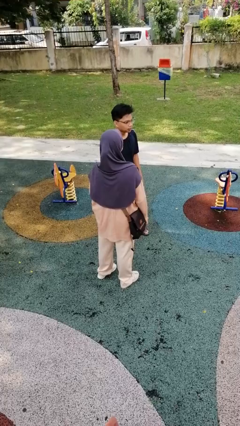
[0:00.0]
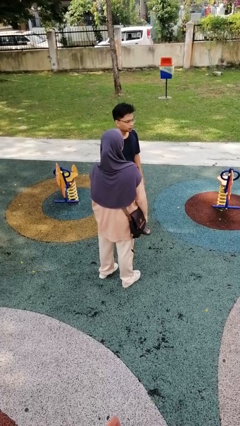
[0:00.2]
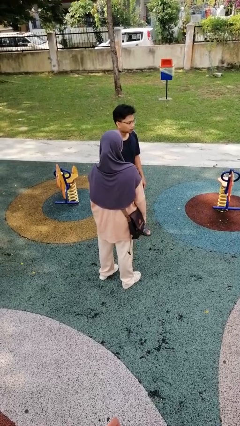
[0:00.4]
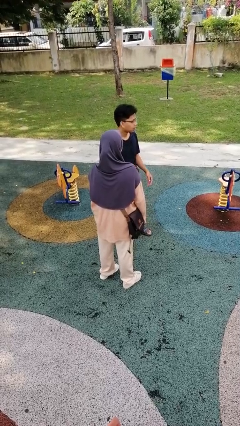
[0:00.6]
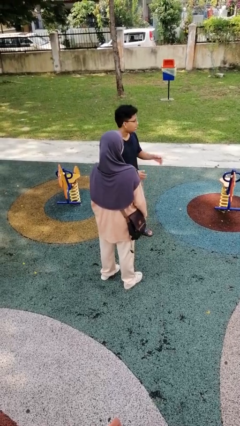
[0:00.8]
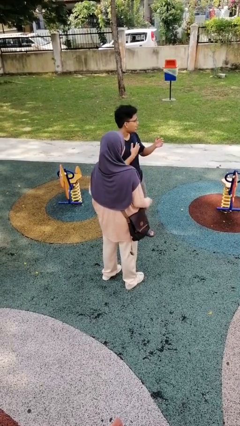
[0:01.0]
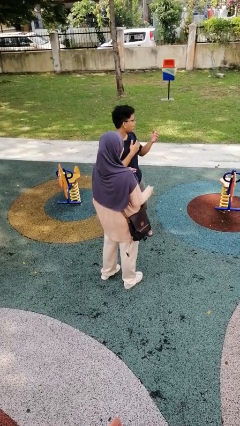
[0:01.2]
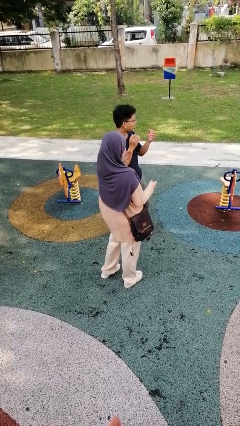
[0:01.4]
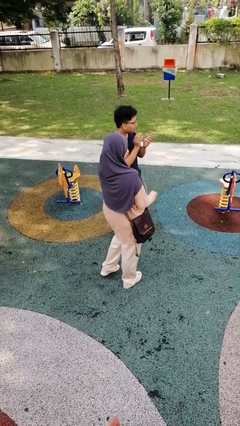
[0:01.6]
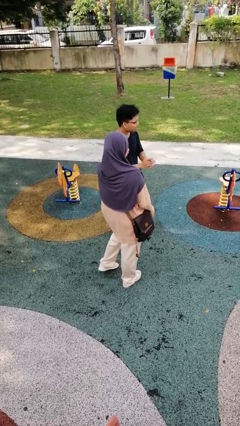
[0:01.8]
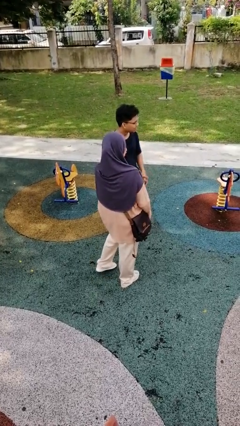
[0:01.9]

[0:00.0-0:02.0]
person laughs with person

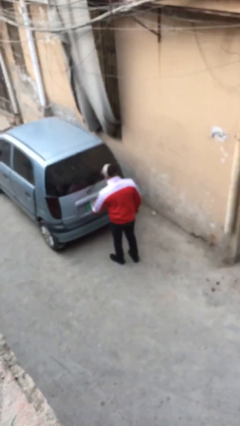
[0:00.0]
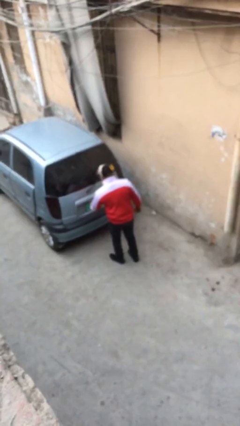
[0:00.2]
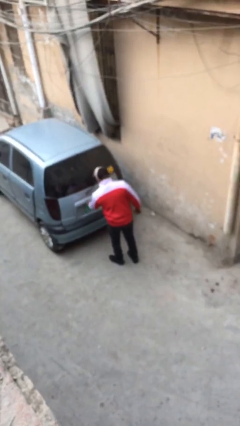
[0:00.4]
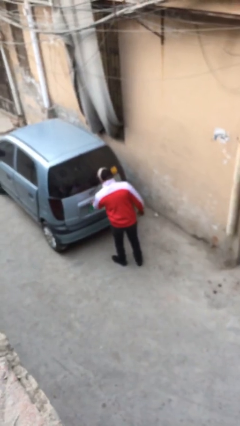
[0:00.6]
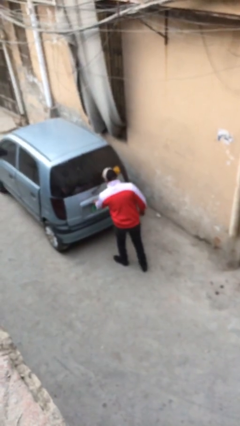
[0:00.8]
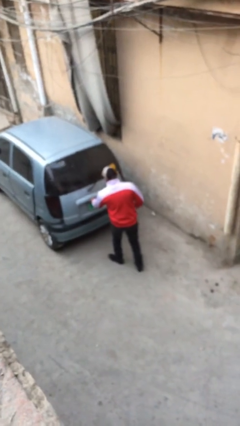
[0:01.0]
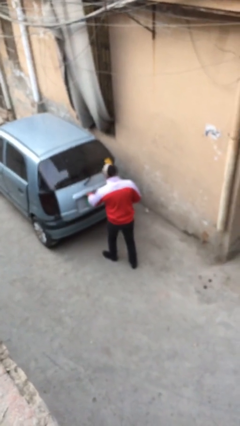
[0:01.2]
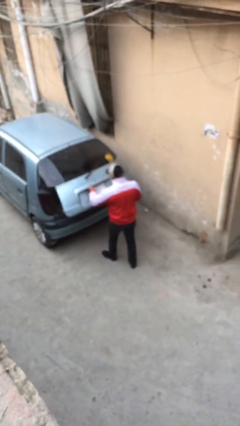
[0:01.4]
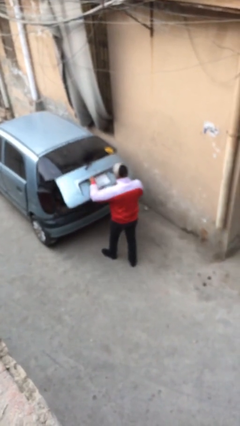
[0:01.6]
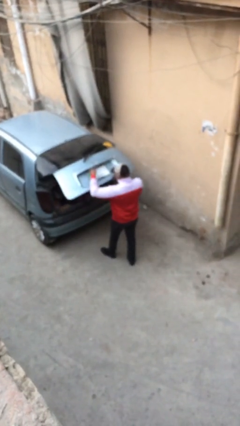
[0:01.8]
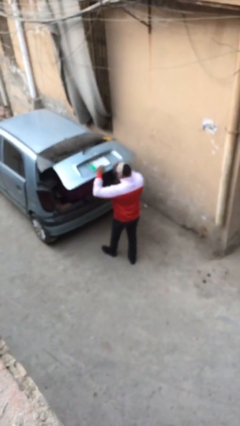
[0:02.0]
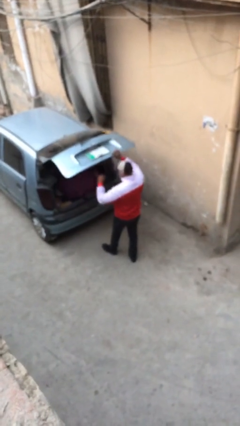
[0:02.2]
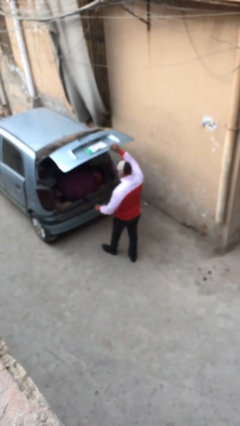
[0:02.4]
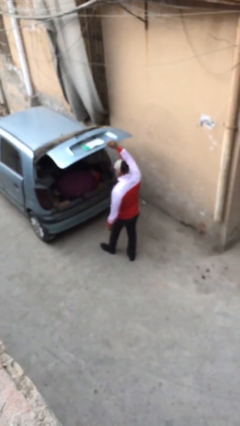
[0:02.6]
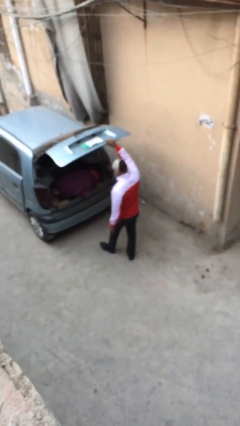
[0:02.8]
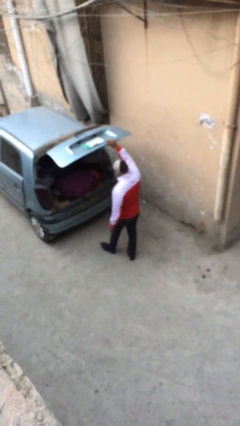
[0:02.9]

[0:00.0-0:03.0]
person opens car trunk

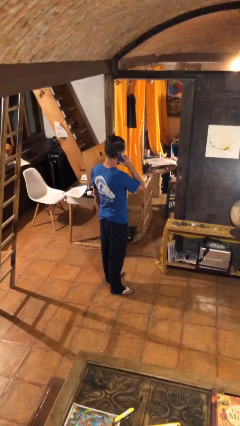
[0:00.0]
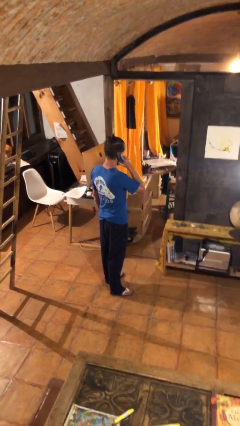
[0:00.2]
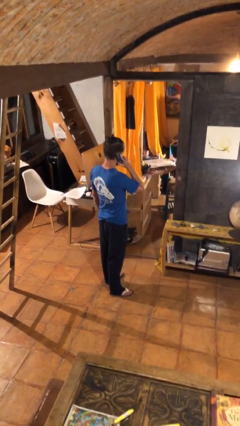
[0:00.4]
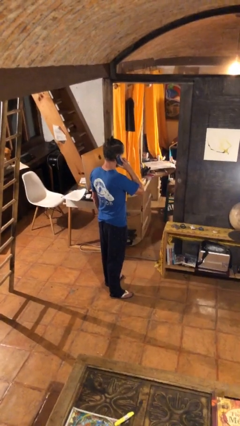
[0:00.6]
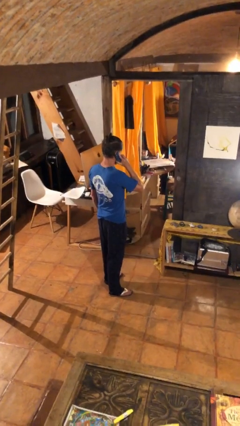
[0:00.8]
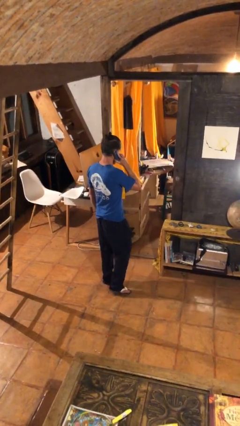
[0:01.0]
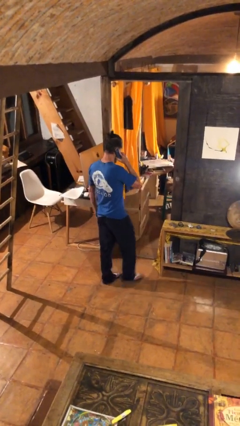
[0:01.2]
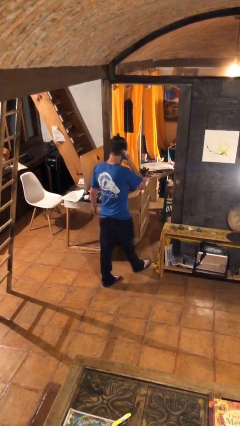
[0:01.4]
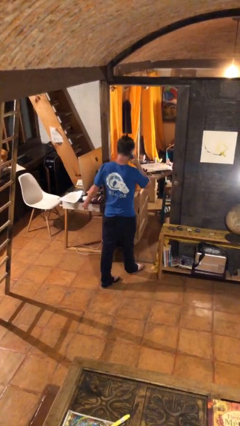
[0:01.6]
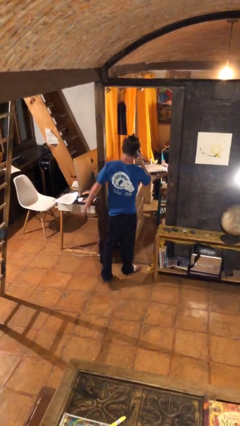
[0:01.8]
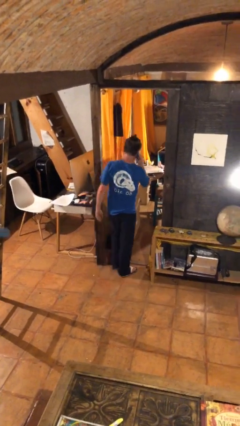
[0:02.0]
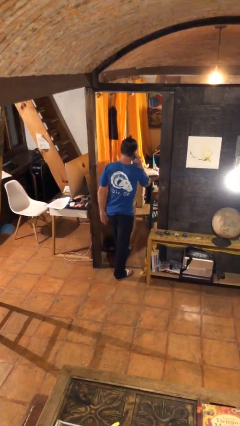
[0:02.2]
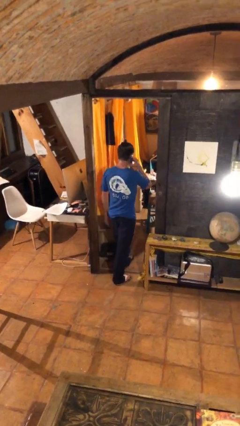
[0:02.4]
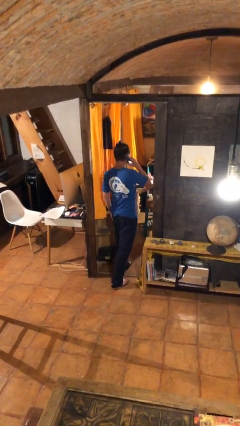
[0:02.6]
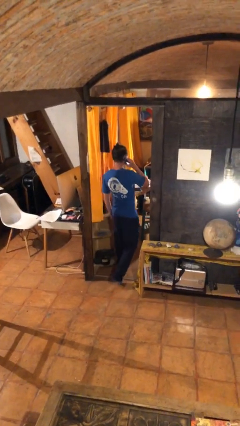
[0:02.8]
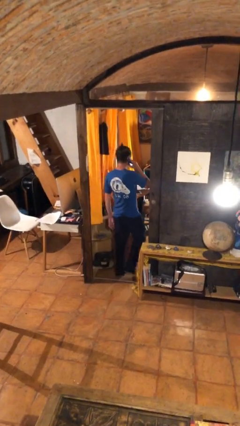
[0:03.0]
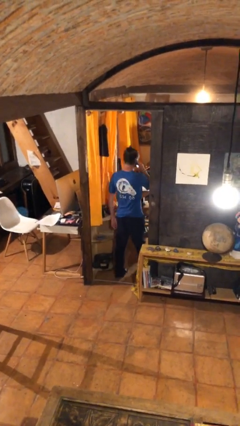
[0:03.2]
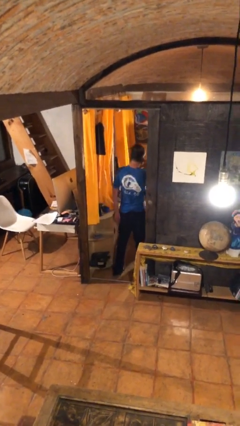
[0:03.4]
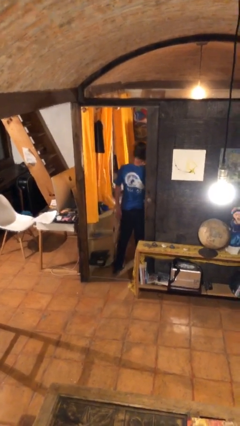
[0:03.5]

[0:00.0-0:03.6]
person exits scene through structure

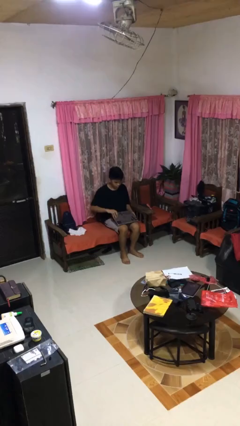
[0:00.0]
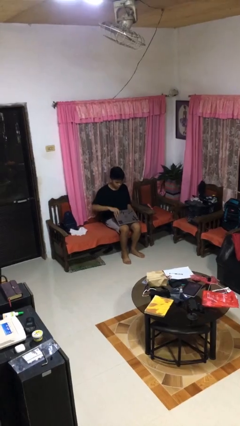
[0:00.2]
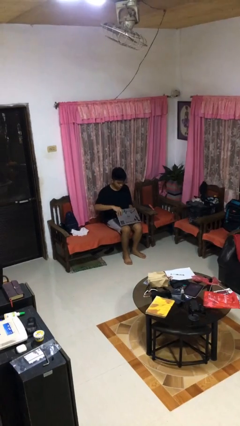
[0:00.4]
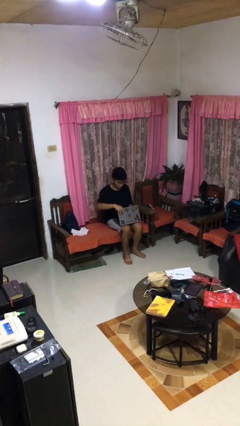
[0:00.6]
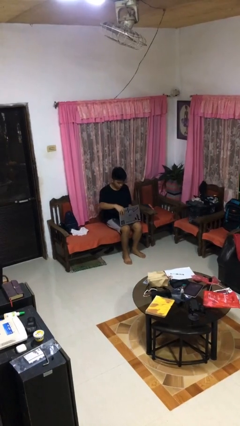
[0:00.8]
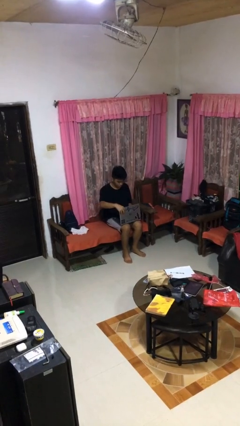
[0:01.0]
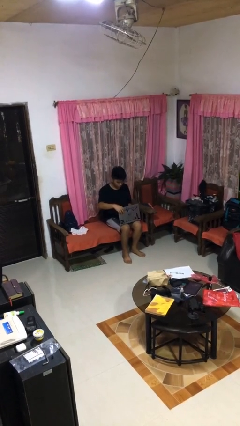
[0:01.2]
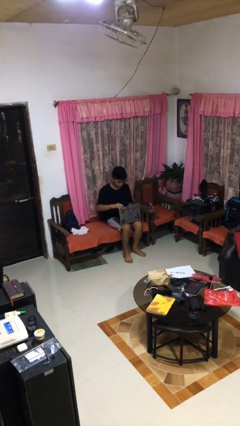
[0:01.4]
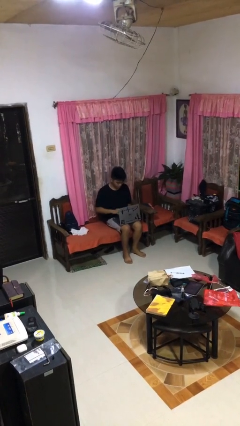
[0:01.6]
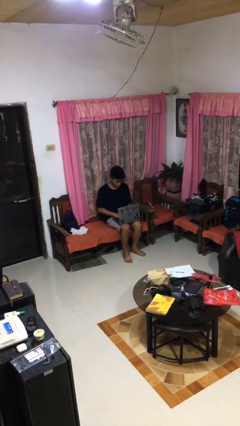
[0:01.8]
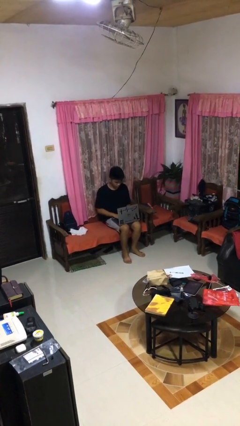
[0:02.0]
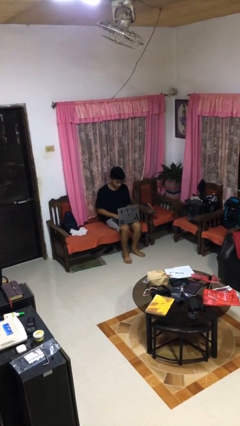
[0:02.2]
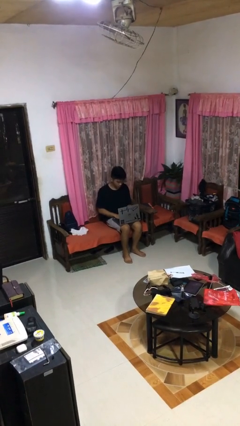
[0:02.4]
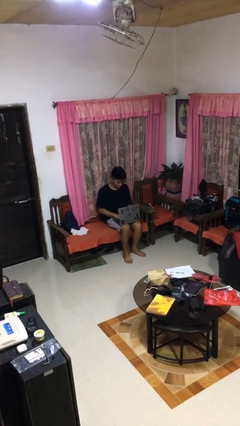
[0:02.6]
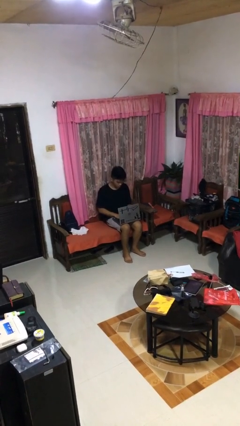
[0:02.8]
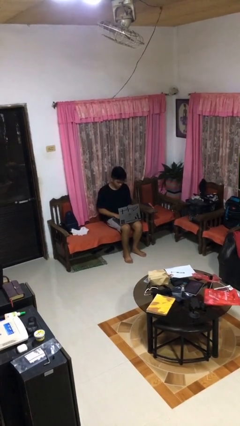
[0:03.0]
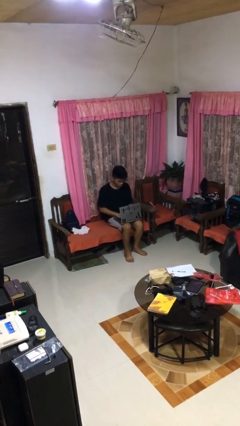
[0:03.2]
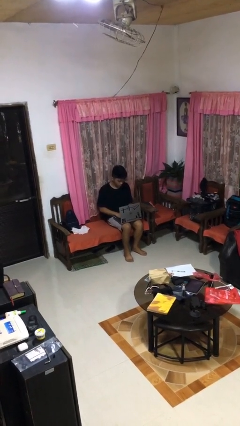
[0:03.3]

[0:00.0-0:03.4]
person opens laptop

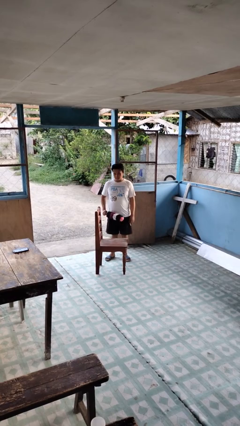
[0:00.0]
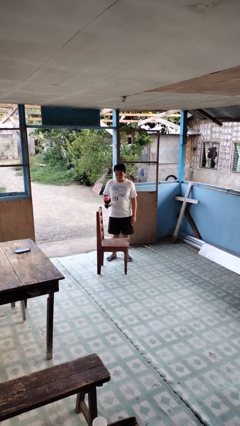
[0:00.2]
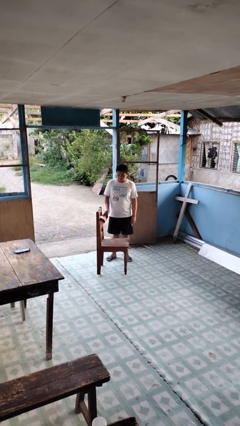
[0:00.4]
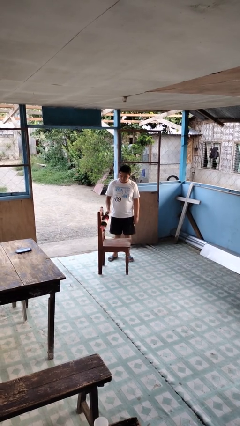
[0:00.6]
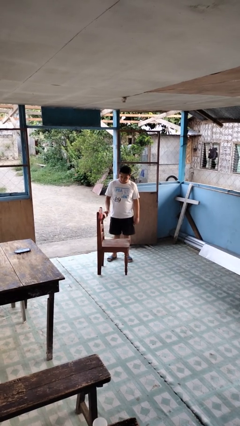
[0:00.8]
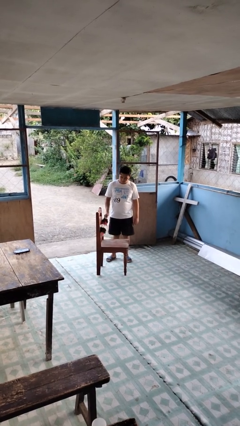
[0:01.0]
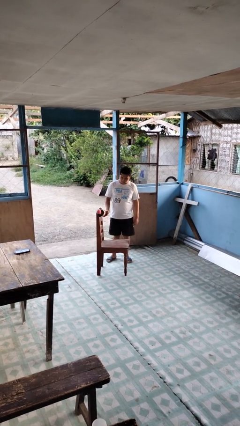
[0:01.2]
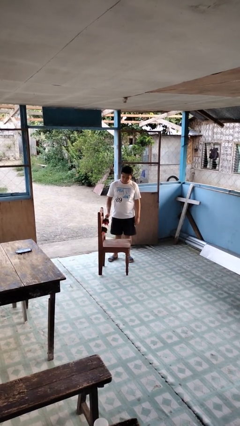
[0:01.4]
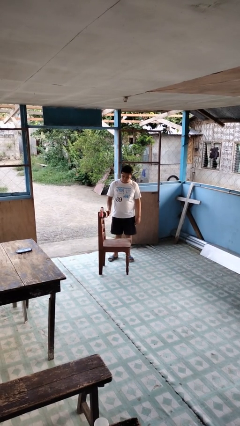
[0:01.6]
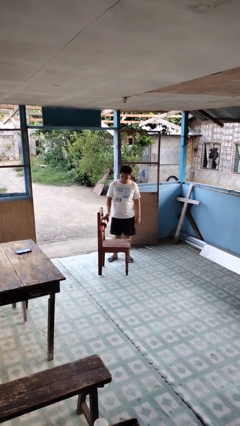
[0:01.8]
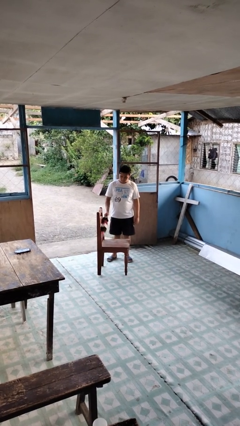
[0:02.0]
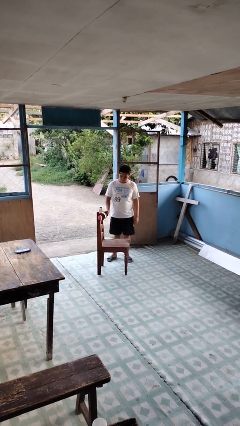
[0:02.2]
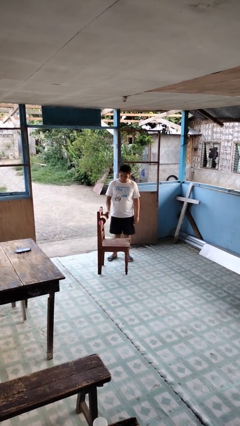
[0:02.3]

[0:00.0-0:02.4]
person dusts furniture

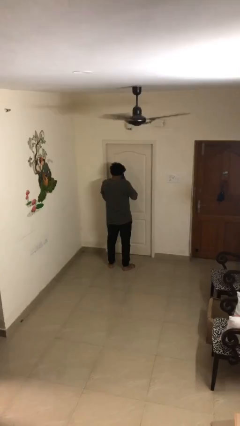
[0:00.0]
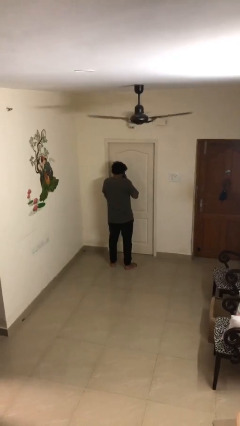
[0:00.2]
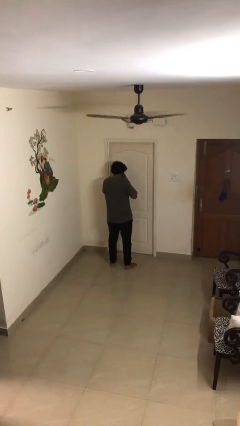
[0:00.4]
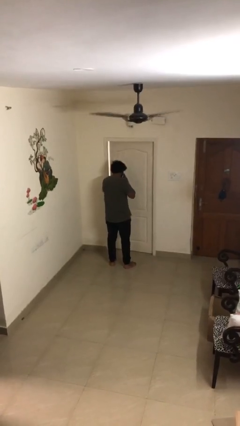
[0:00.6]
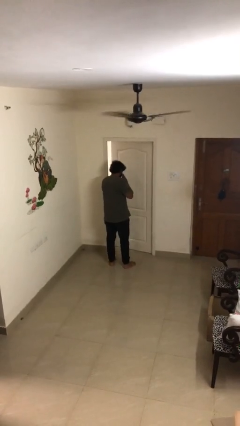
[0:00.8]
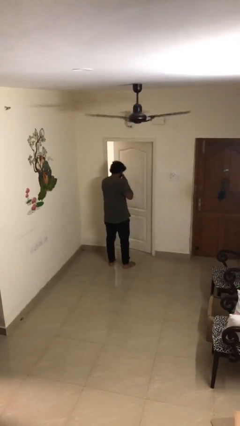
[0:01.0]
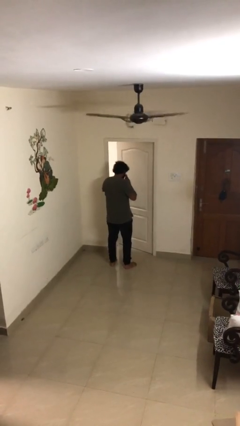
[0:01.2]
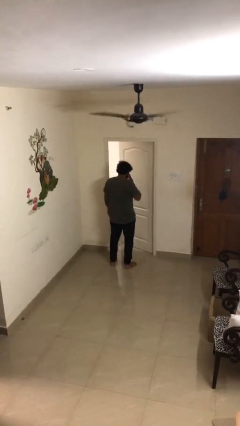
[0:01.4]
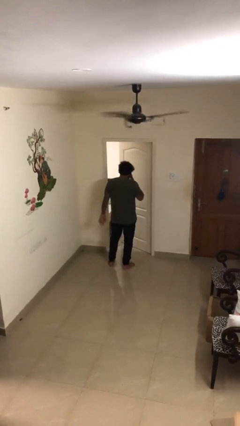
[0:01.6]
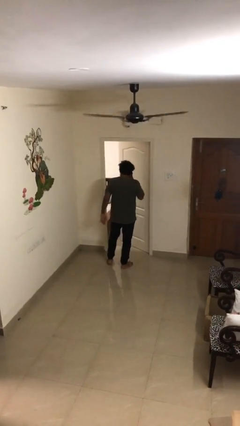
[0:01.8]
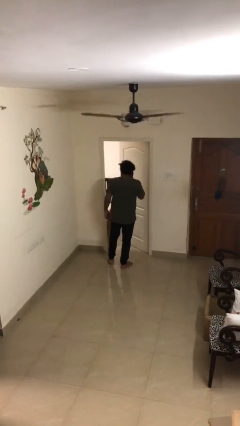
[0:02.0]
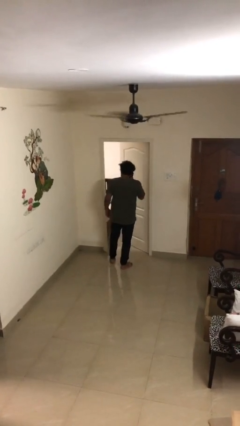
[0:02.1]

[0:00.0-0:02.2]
person opens facility door

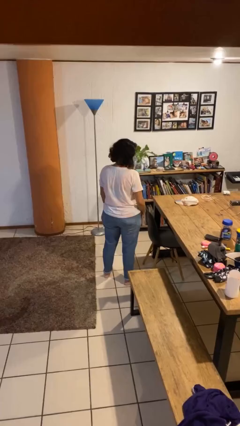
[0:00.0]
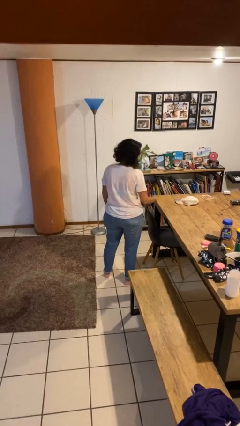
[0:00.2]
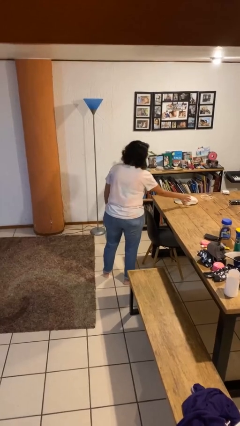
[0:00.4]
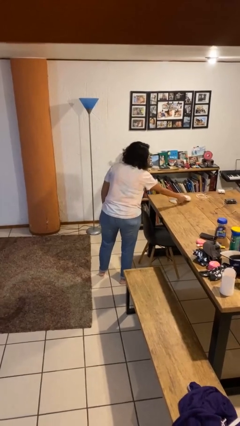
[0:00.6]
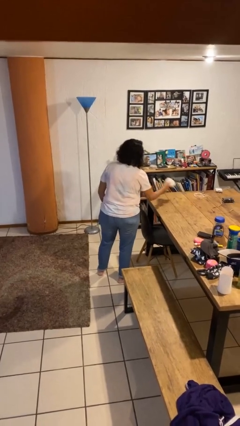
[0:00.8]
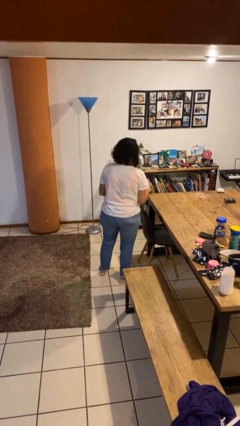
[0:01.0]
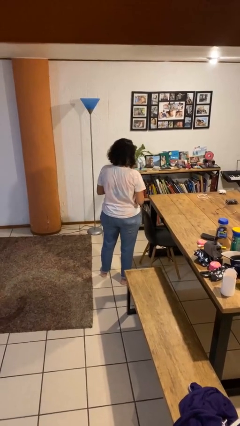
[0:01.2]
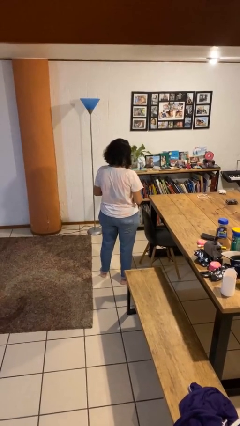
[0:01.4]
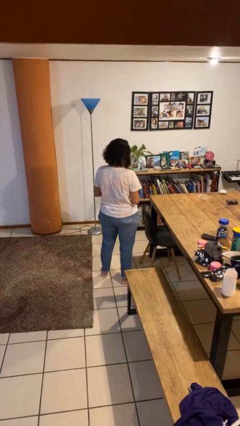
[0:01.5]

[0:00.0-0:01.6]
person picks up object from table
